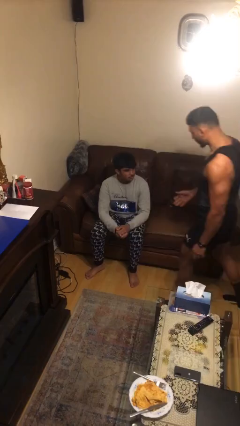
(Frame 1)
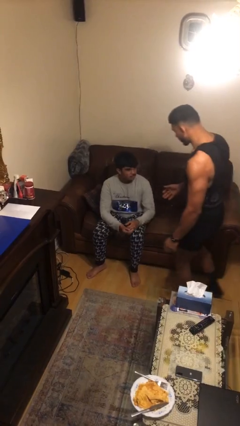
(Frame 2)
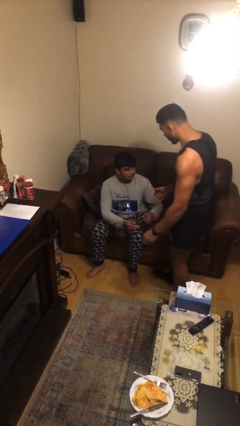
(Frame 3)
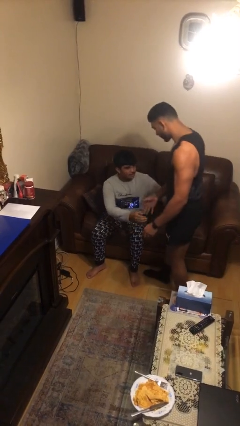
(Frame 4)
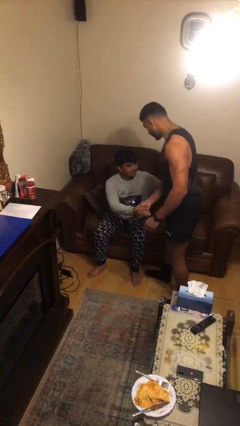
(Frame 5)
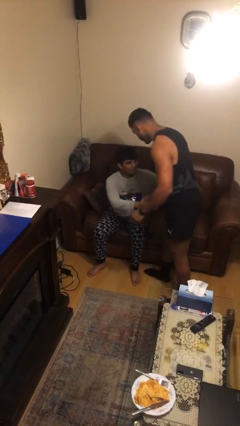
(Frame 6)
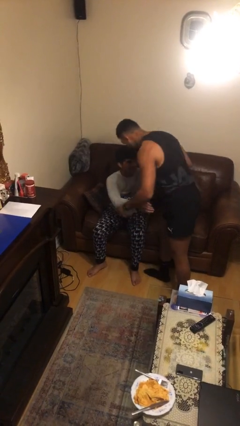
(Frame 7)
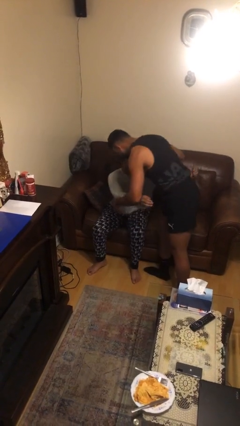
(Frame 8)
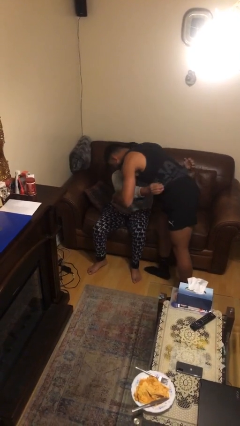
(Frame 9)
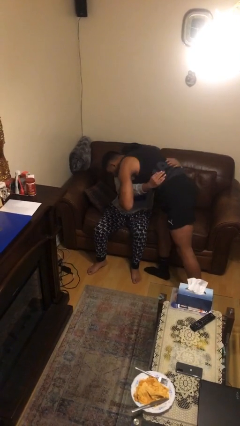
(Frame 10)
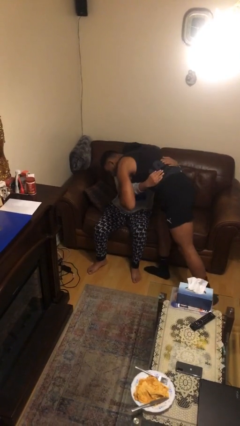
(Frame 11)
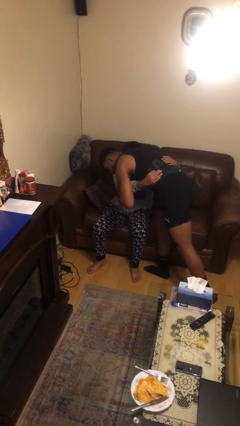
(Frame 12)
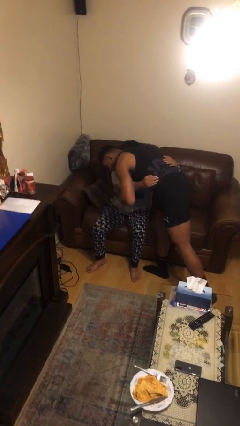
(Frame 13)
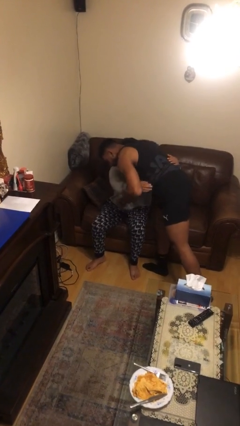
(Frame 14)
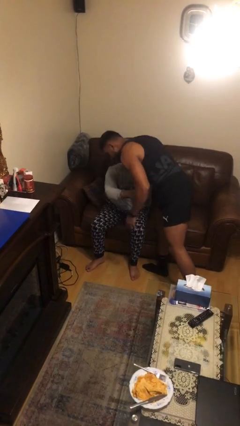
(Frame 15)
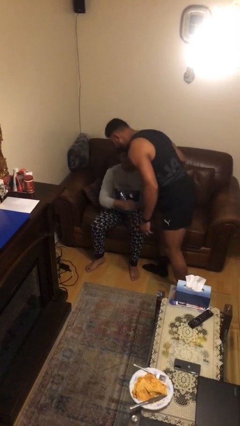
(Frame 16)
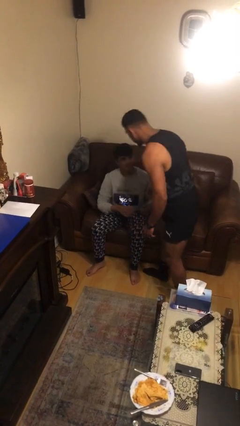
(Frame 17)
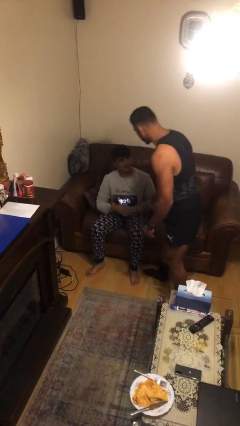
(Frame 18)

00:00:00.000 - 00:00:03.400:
person embraces person

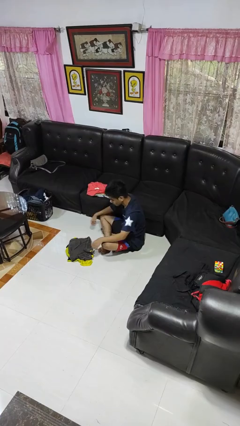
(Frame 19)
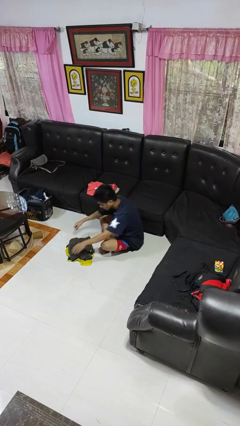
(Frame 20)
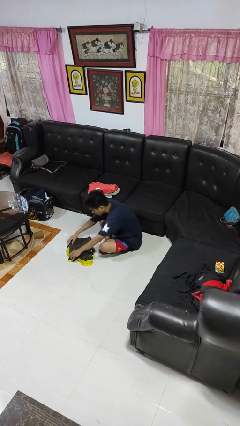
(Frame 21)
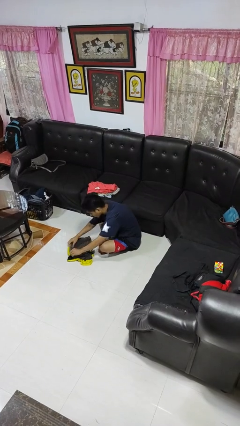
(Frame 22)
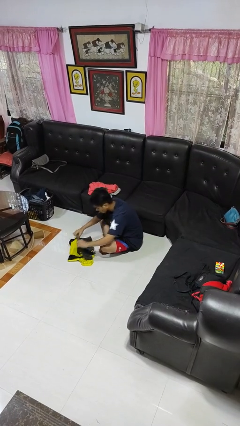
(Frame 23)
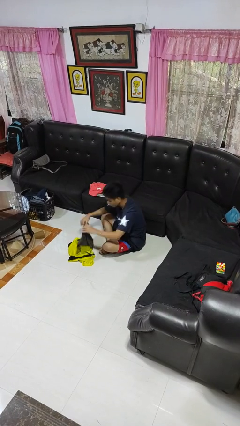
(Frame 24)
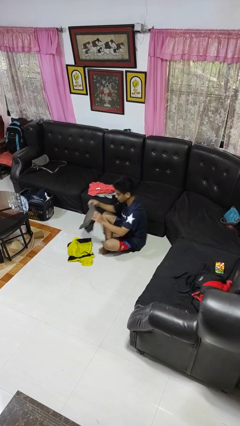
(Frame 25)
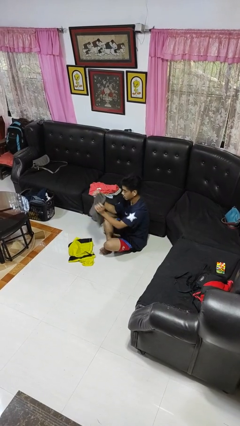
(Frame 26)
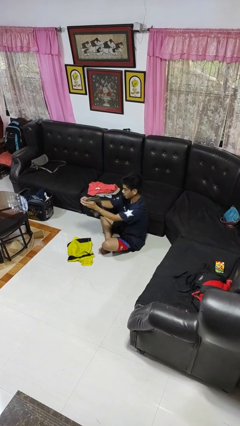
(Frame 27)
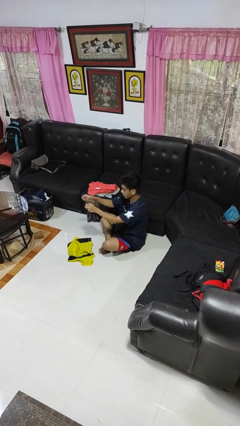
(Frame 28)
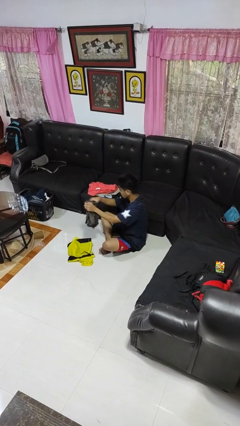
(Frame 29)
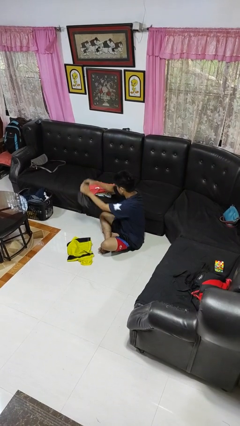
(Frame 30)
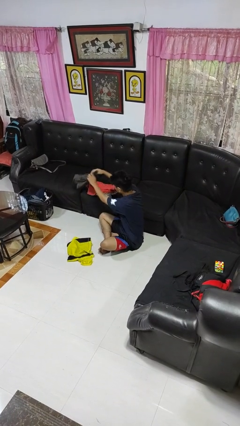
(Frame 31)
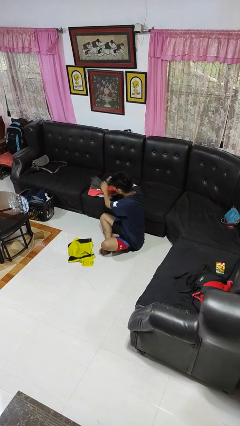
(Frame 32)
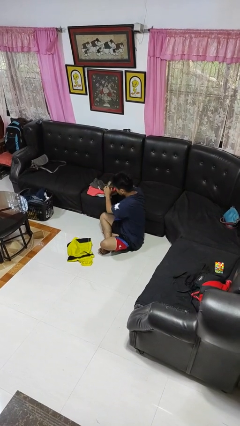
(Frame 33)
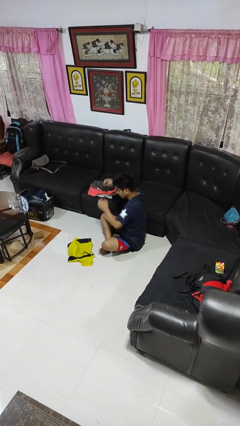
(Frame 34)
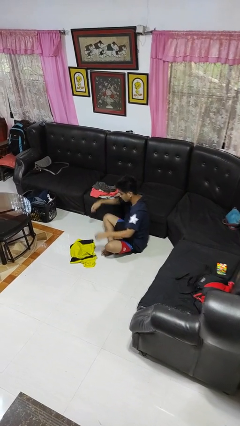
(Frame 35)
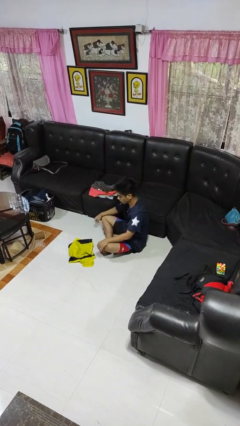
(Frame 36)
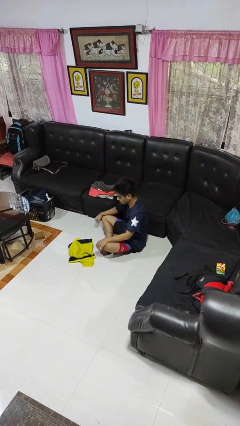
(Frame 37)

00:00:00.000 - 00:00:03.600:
person folds shirt

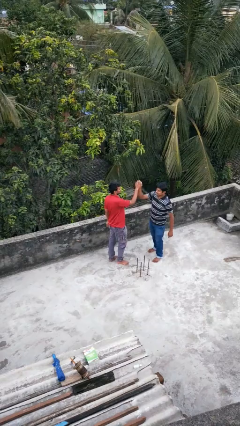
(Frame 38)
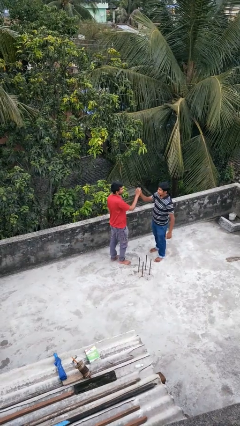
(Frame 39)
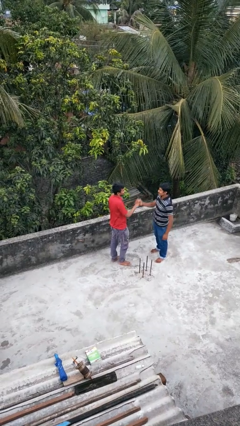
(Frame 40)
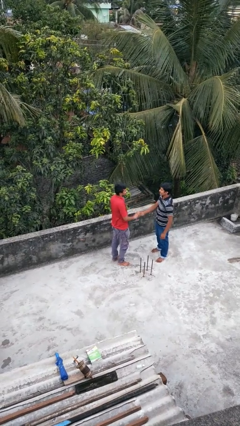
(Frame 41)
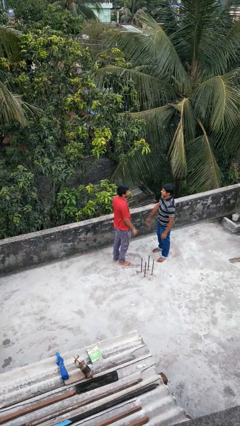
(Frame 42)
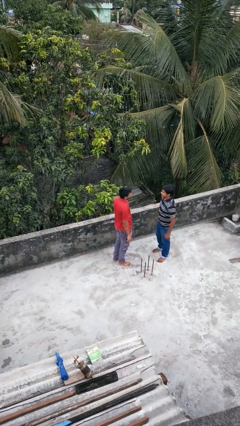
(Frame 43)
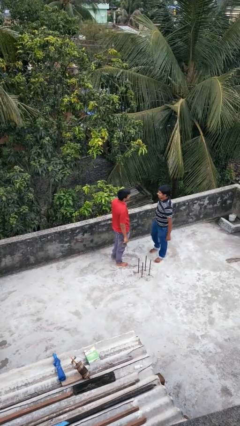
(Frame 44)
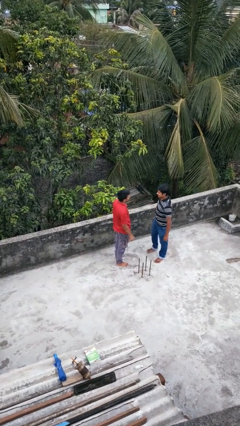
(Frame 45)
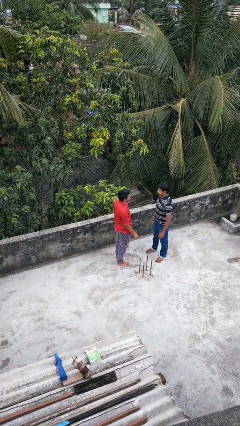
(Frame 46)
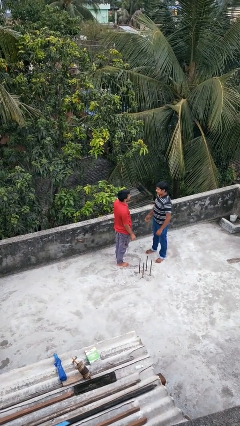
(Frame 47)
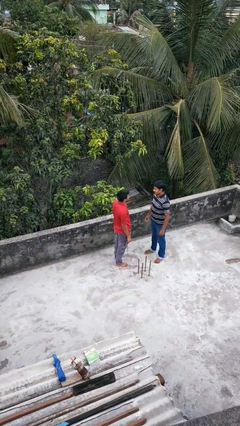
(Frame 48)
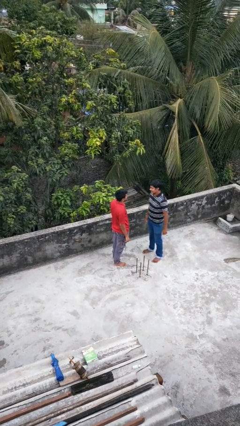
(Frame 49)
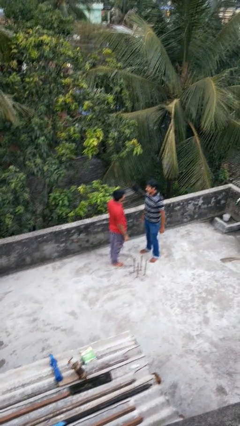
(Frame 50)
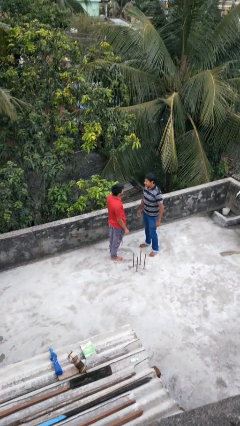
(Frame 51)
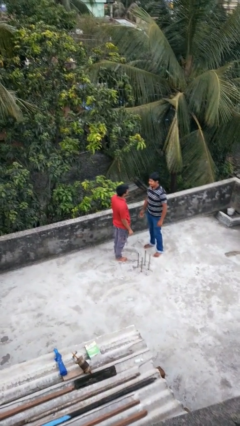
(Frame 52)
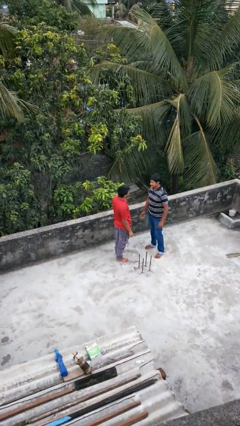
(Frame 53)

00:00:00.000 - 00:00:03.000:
person highfives hand

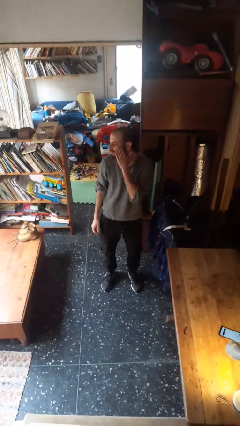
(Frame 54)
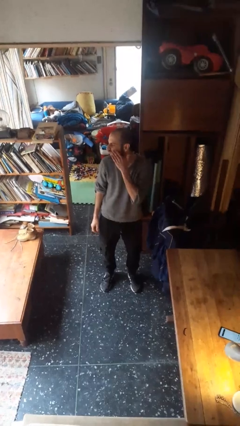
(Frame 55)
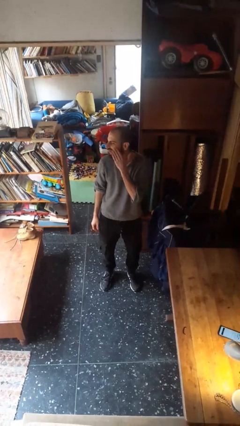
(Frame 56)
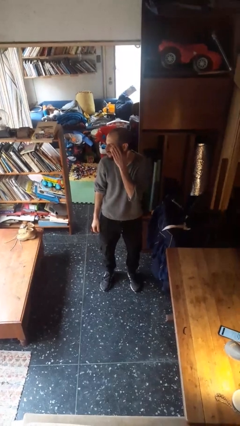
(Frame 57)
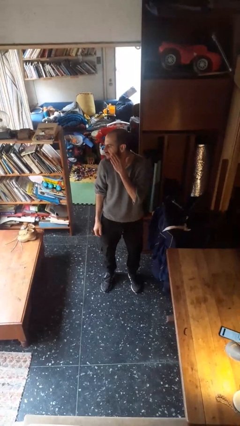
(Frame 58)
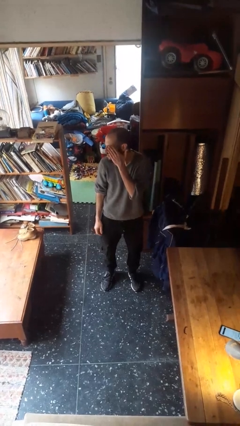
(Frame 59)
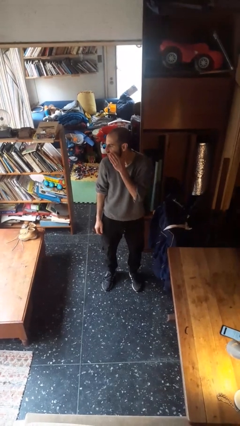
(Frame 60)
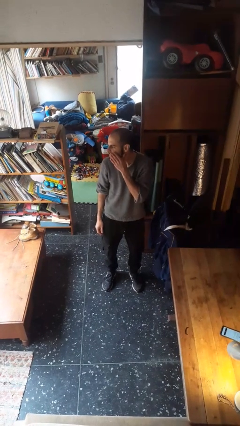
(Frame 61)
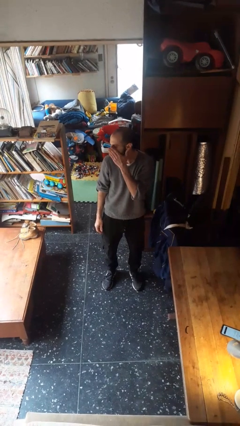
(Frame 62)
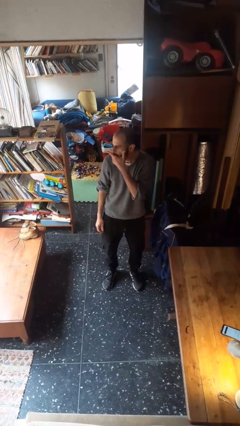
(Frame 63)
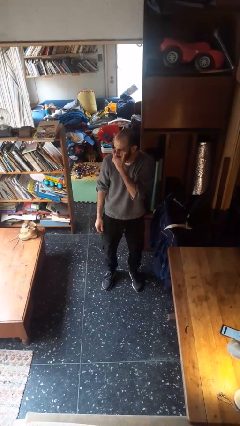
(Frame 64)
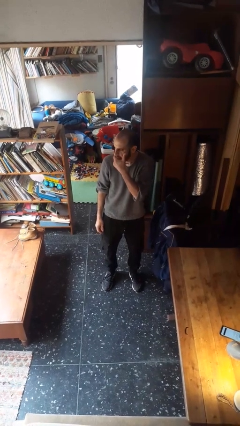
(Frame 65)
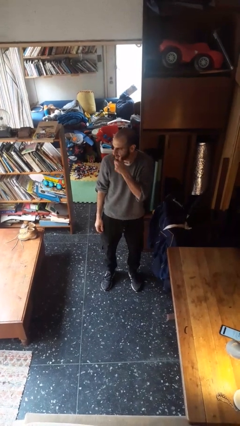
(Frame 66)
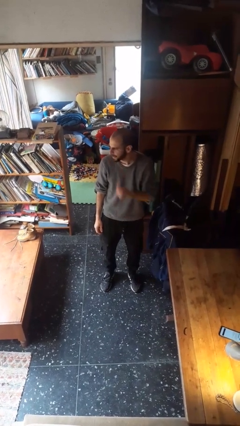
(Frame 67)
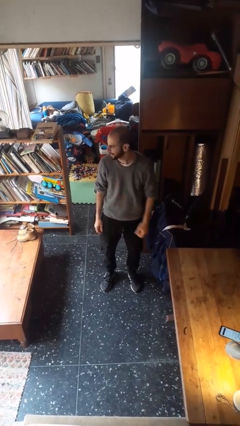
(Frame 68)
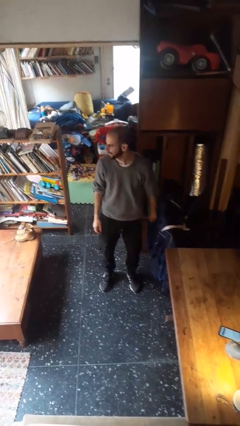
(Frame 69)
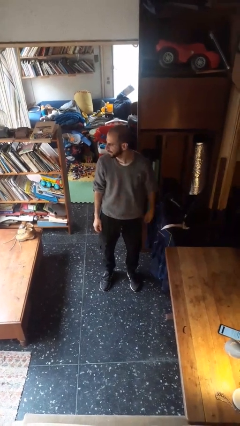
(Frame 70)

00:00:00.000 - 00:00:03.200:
person scratches face

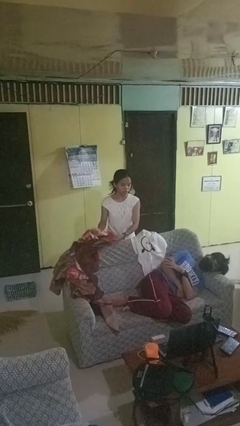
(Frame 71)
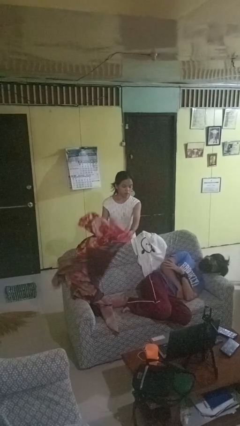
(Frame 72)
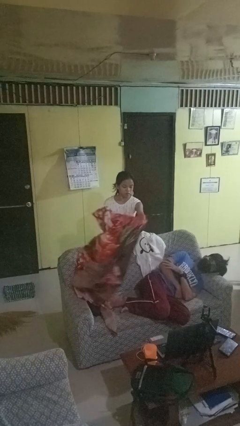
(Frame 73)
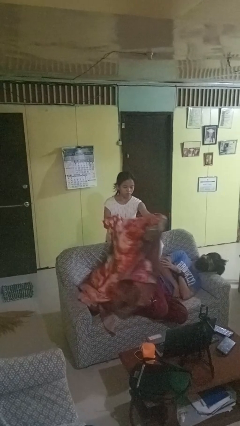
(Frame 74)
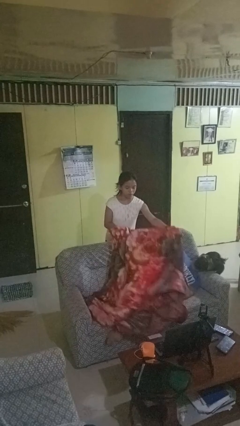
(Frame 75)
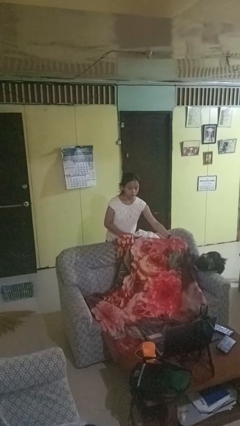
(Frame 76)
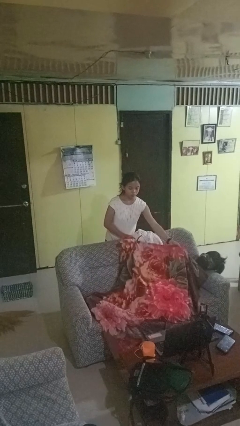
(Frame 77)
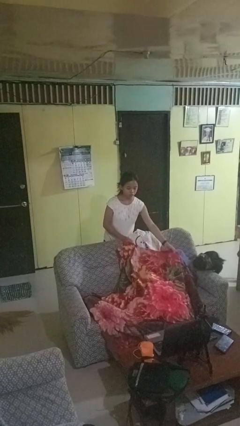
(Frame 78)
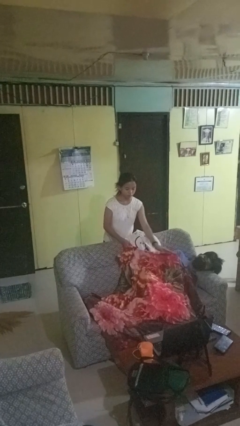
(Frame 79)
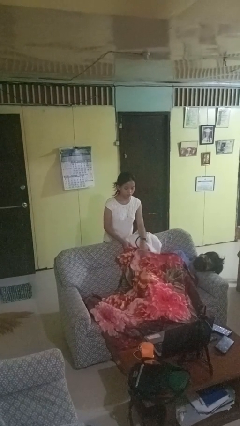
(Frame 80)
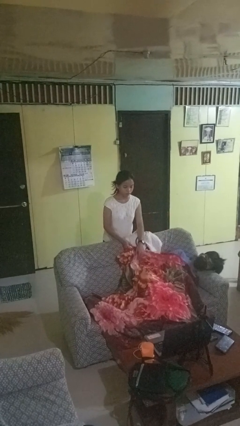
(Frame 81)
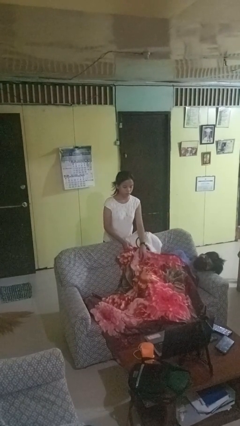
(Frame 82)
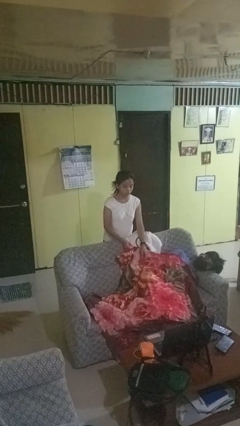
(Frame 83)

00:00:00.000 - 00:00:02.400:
person covers friend with blanket

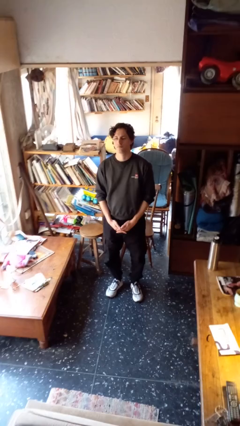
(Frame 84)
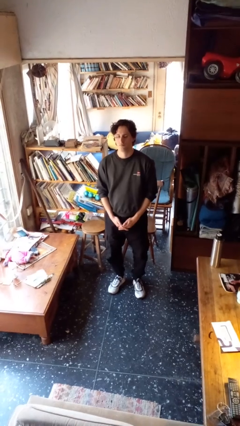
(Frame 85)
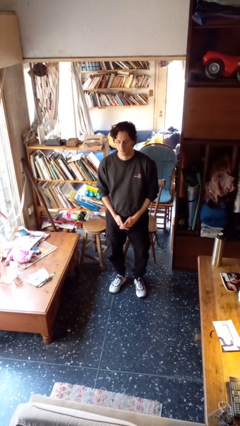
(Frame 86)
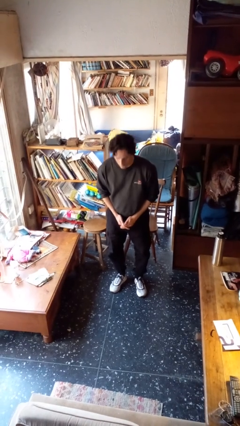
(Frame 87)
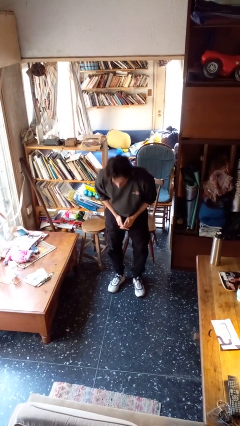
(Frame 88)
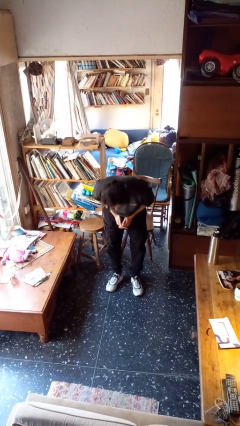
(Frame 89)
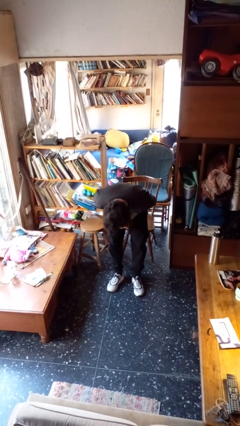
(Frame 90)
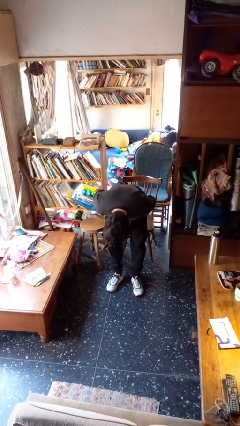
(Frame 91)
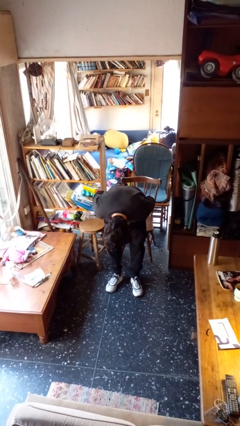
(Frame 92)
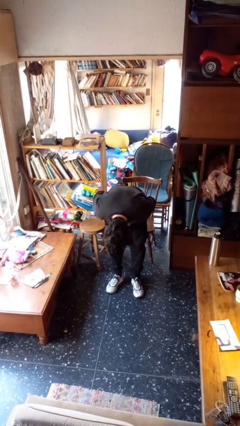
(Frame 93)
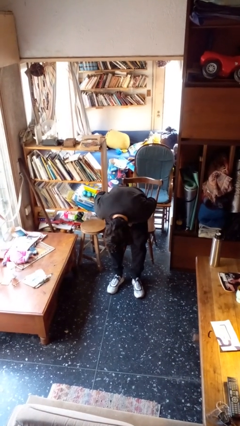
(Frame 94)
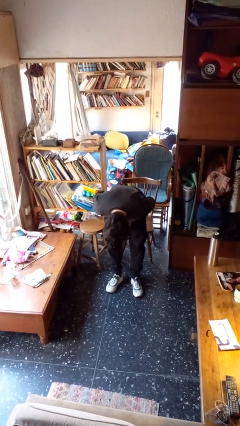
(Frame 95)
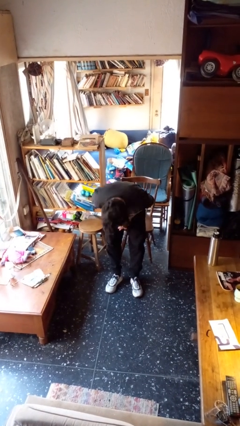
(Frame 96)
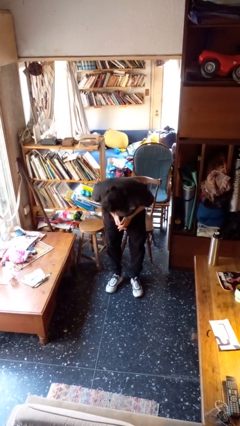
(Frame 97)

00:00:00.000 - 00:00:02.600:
person bows
